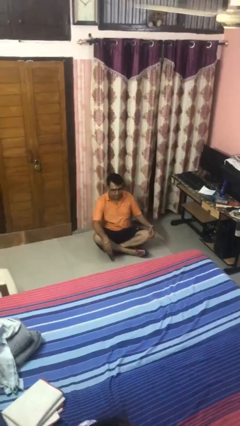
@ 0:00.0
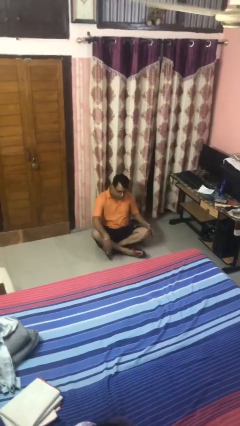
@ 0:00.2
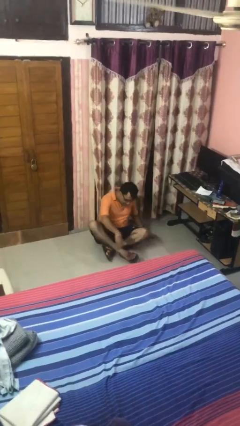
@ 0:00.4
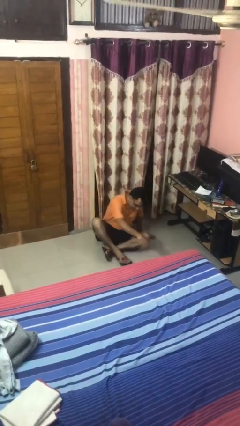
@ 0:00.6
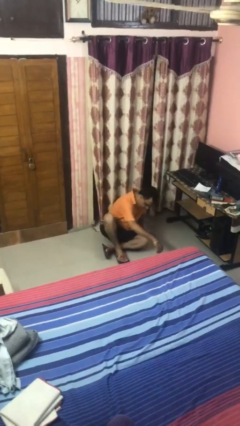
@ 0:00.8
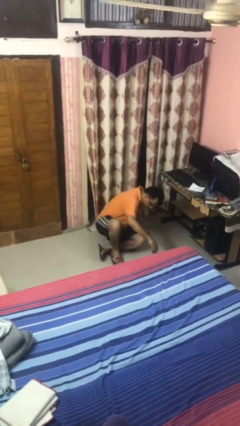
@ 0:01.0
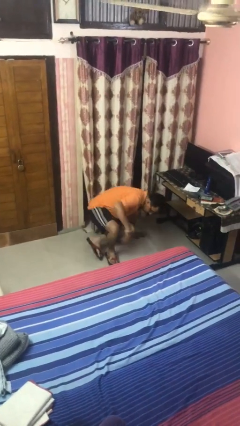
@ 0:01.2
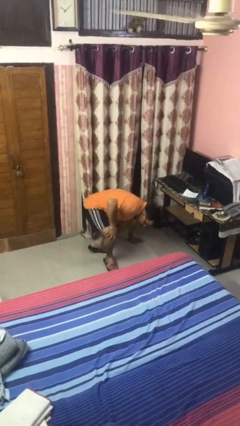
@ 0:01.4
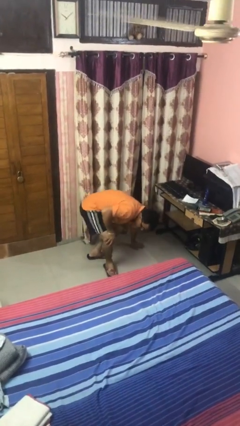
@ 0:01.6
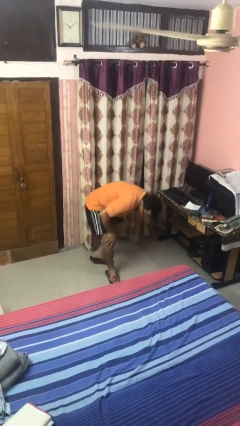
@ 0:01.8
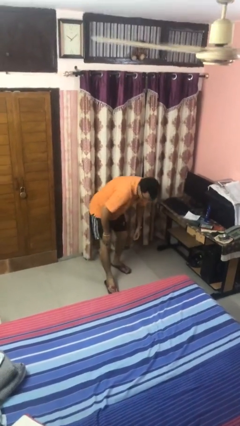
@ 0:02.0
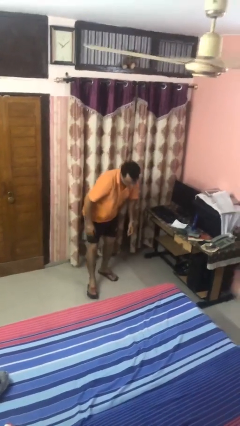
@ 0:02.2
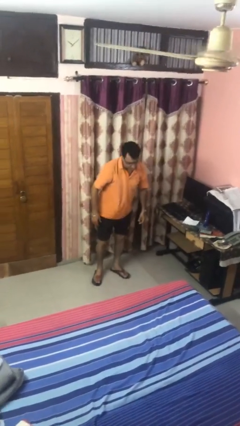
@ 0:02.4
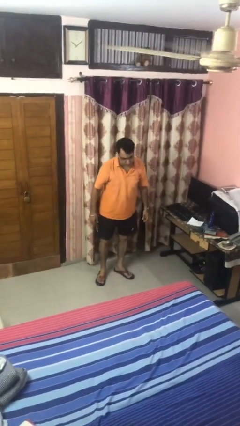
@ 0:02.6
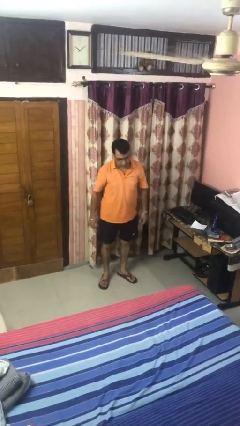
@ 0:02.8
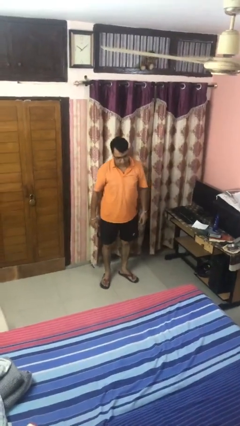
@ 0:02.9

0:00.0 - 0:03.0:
person stands up from floor

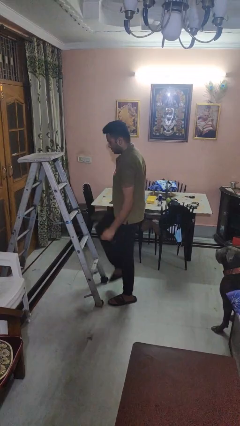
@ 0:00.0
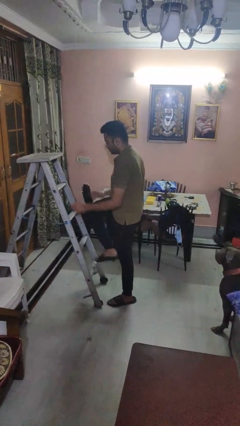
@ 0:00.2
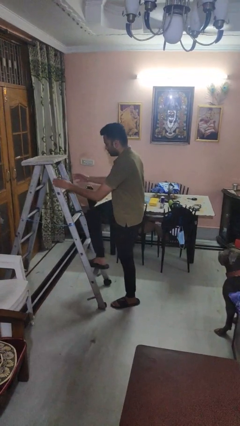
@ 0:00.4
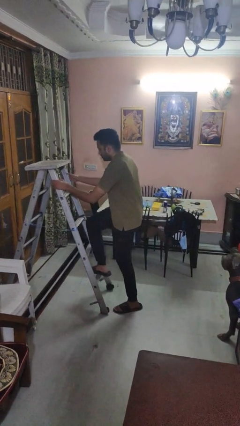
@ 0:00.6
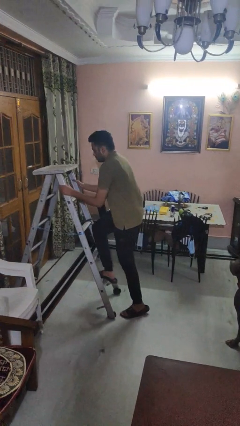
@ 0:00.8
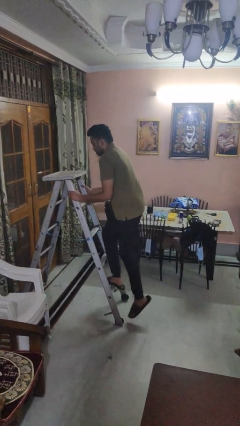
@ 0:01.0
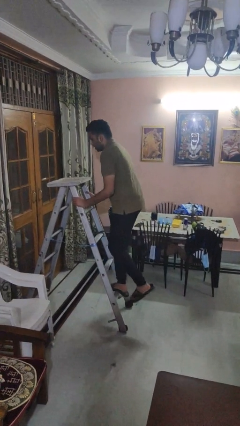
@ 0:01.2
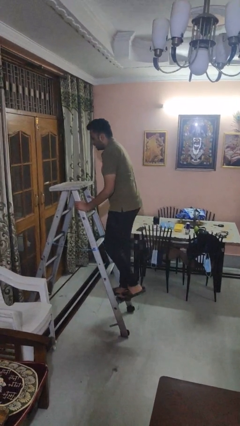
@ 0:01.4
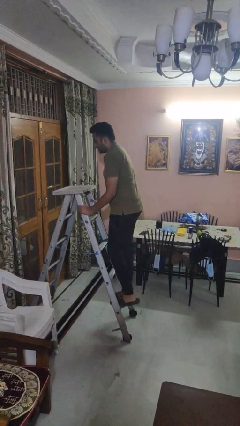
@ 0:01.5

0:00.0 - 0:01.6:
person climbs up ladder

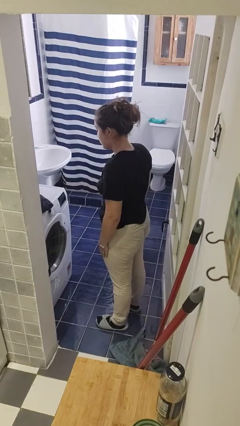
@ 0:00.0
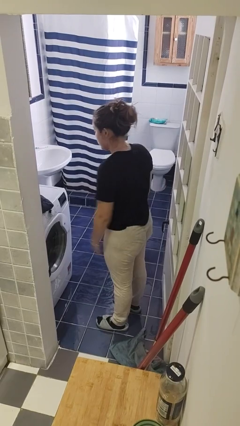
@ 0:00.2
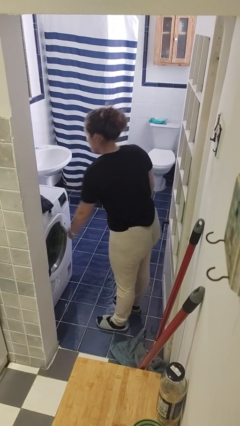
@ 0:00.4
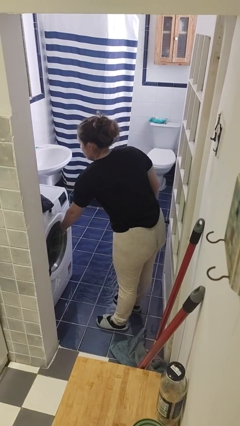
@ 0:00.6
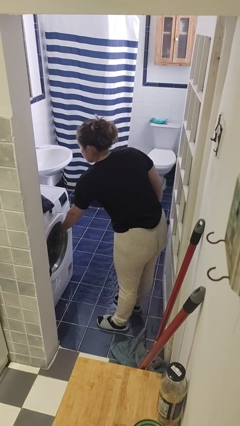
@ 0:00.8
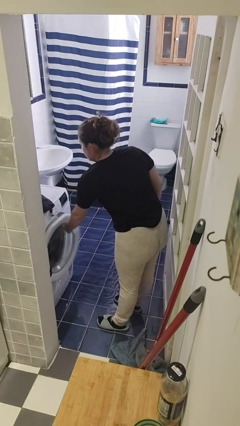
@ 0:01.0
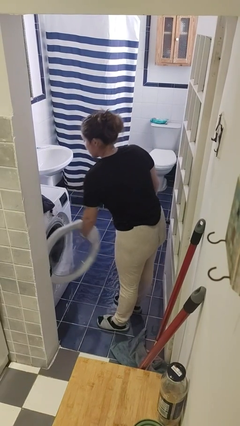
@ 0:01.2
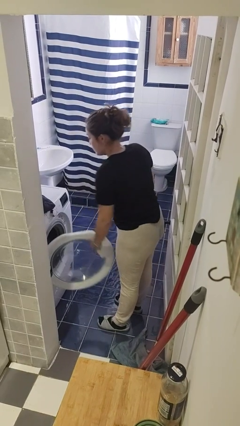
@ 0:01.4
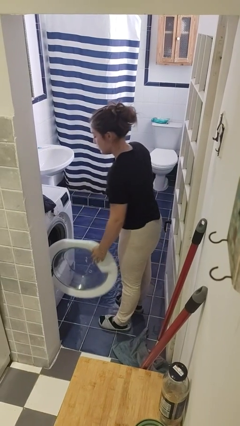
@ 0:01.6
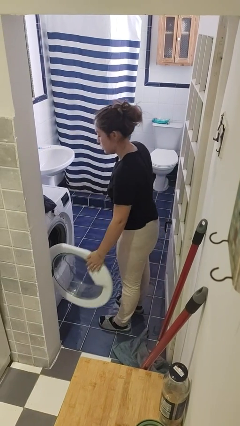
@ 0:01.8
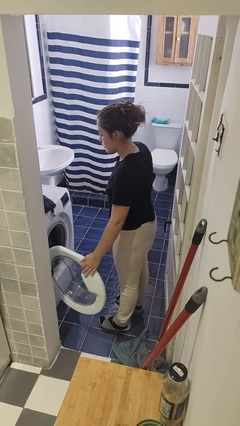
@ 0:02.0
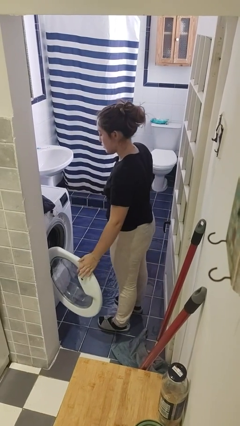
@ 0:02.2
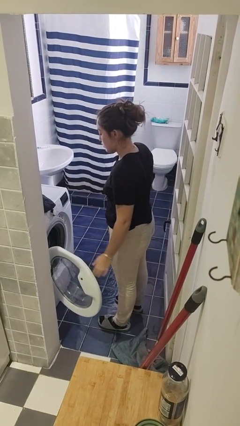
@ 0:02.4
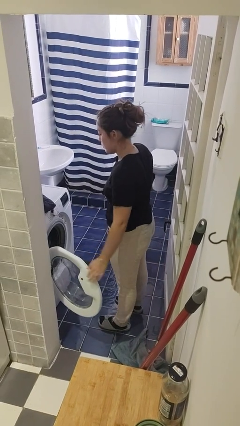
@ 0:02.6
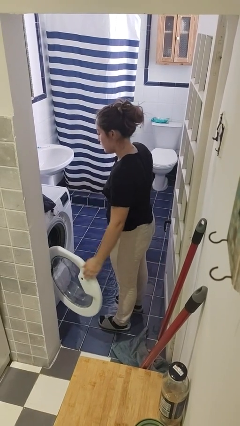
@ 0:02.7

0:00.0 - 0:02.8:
person opens clothes washer

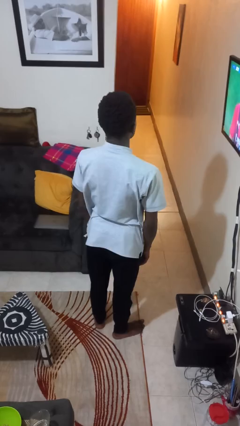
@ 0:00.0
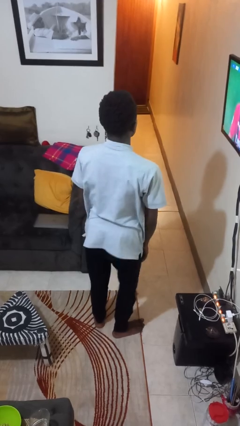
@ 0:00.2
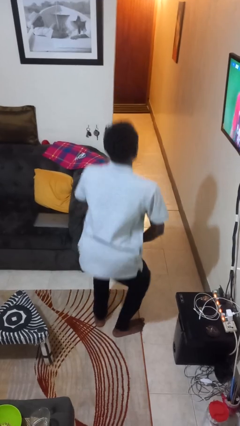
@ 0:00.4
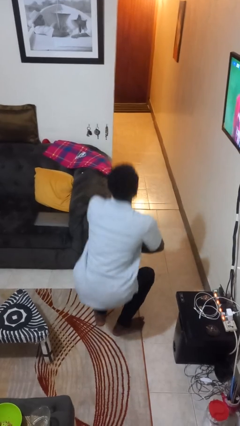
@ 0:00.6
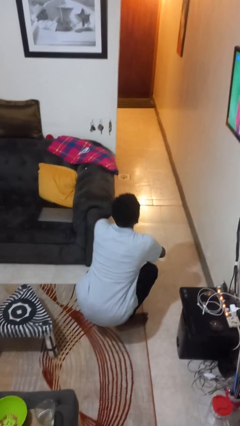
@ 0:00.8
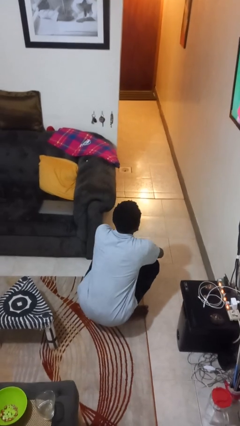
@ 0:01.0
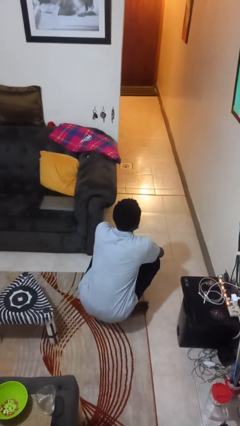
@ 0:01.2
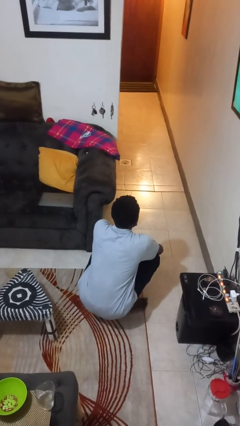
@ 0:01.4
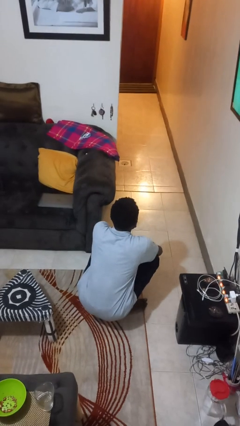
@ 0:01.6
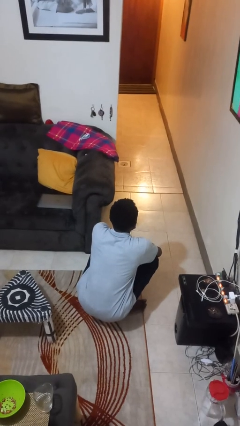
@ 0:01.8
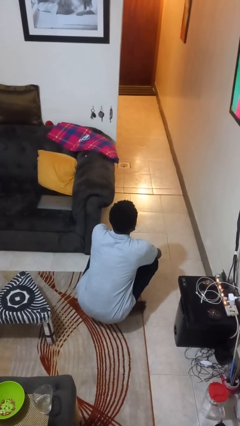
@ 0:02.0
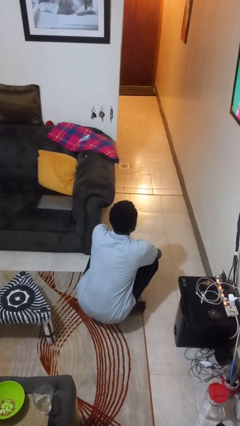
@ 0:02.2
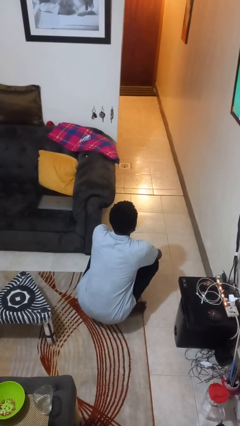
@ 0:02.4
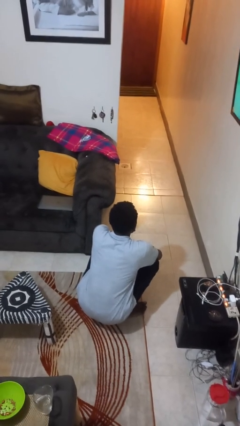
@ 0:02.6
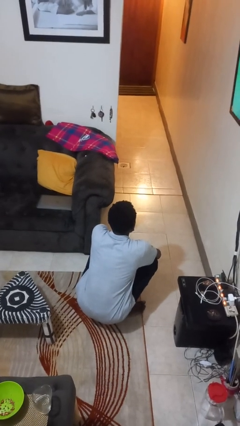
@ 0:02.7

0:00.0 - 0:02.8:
person squats

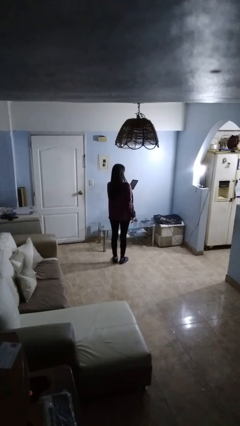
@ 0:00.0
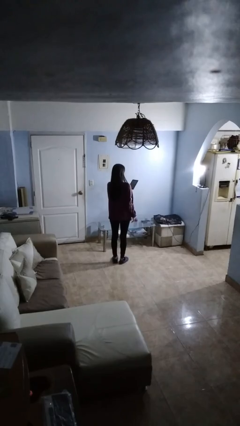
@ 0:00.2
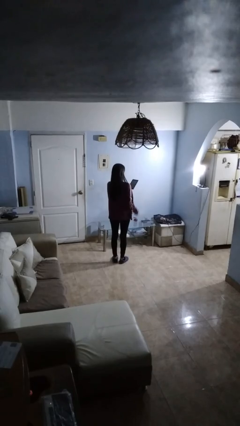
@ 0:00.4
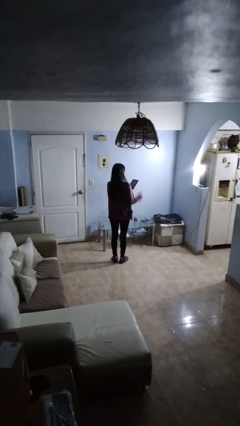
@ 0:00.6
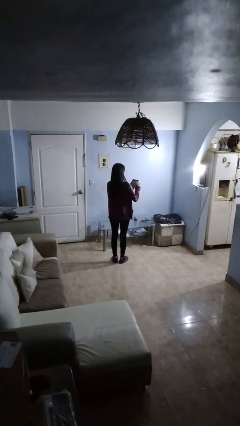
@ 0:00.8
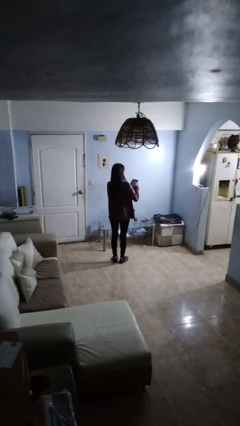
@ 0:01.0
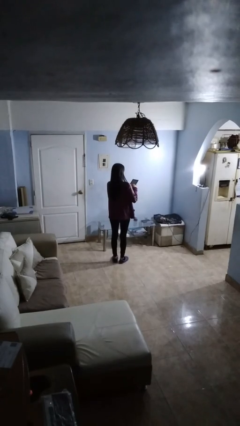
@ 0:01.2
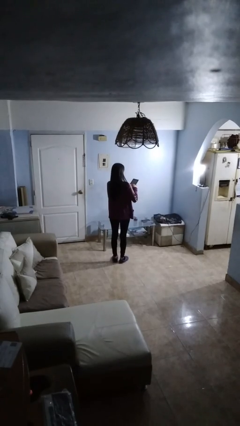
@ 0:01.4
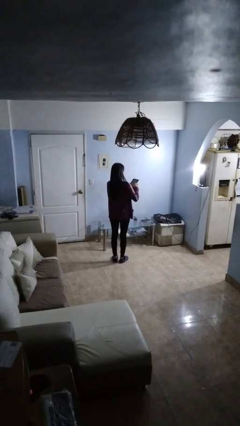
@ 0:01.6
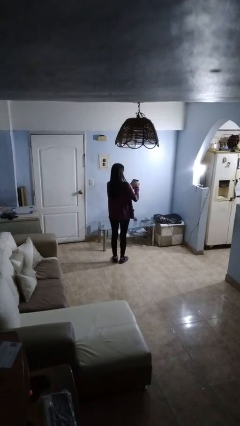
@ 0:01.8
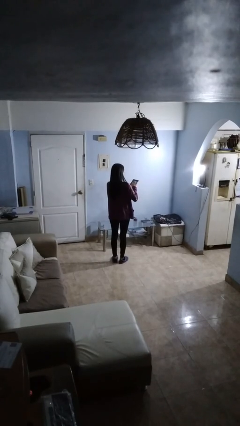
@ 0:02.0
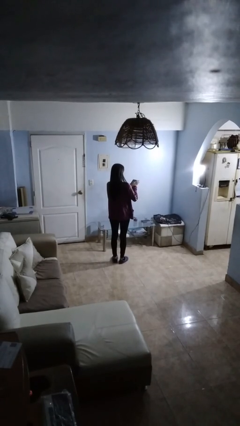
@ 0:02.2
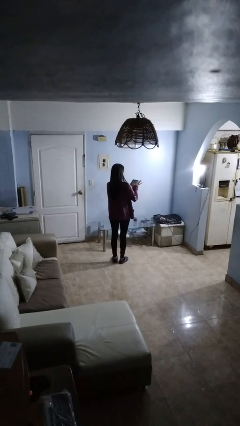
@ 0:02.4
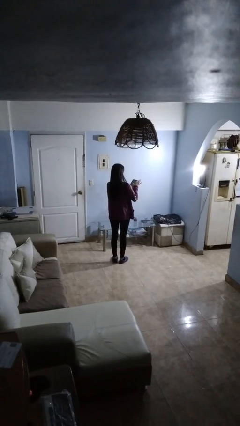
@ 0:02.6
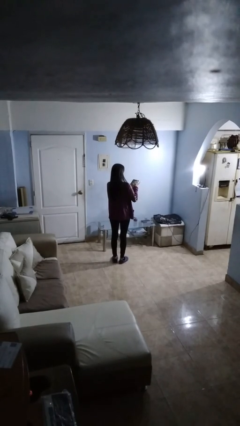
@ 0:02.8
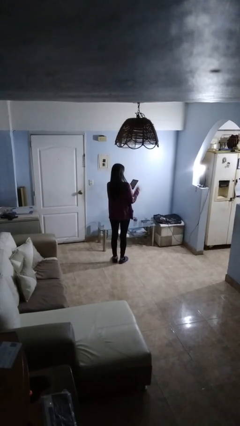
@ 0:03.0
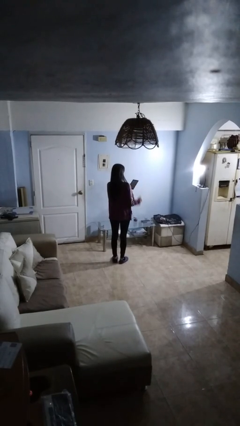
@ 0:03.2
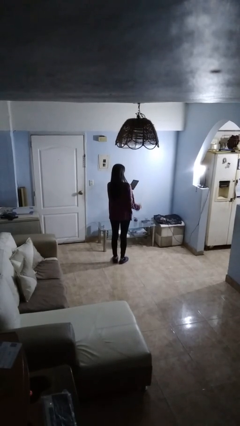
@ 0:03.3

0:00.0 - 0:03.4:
person interacts with tablet

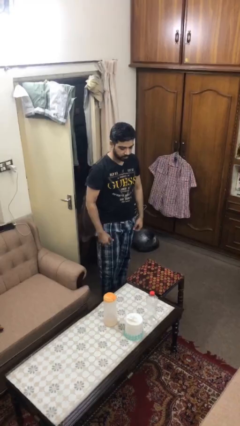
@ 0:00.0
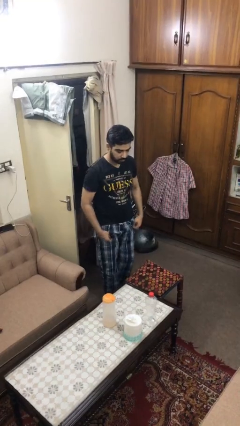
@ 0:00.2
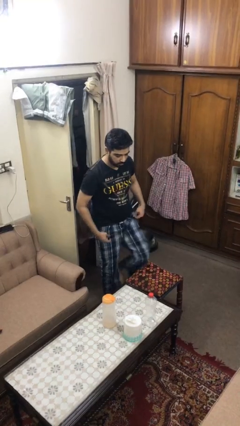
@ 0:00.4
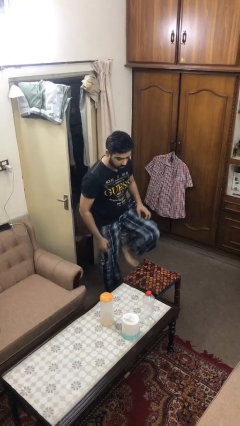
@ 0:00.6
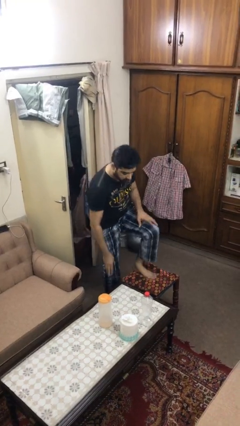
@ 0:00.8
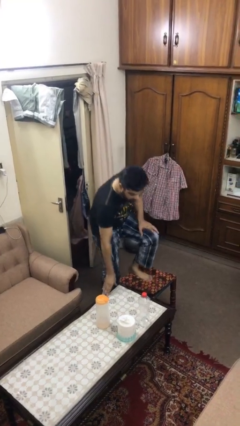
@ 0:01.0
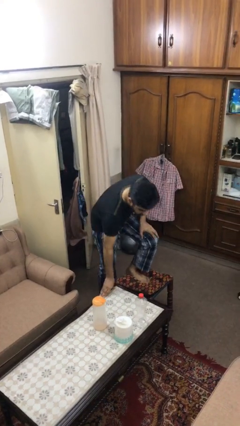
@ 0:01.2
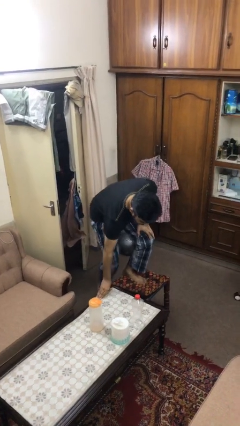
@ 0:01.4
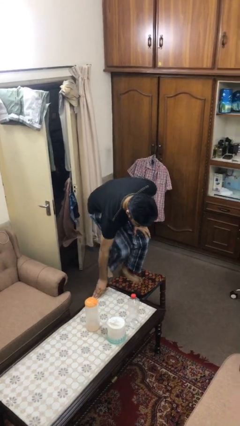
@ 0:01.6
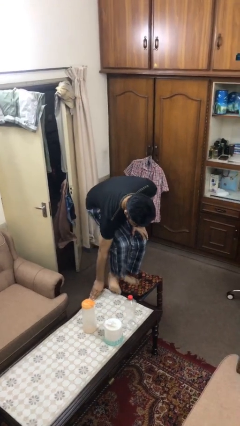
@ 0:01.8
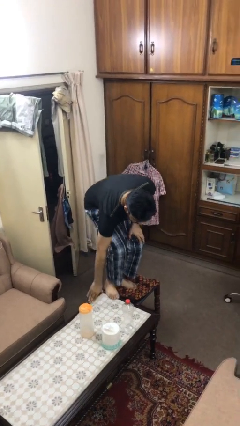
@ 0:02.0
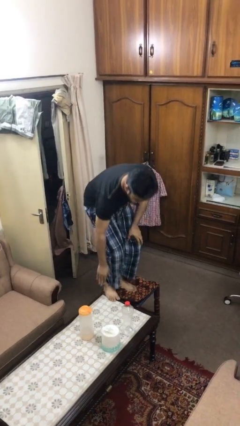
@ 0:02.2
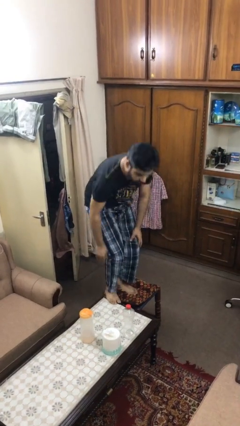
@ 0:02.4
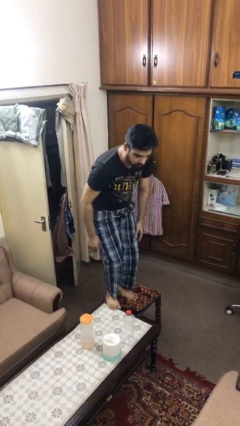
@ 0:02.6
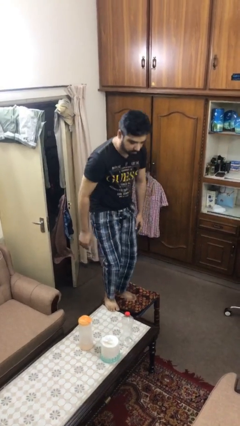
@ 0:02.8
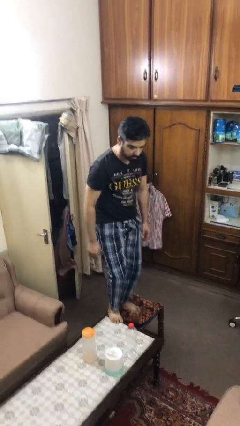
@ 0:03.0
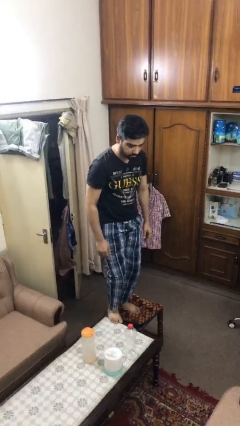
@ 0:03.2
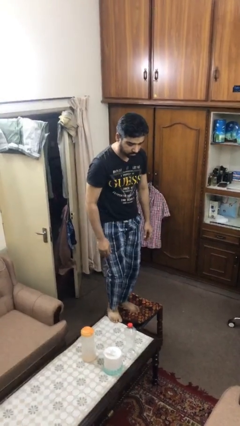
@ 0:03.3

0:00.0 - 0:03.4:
person climbs on table
